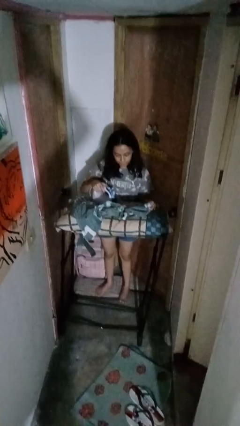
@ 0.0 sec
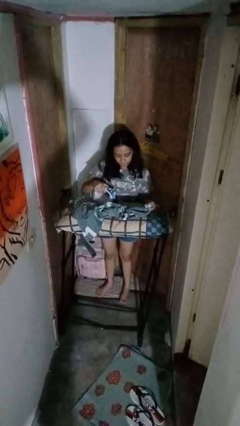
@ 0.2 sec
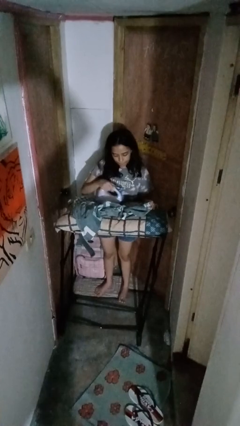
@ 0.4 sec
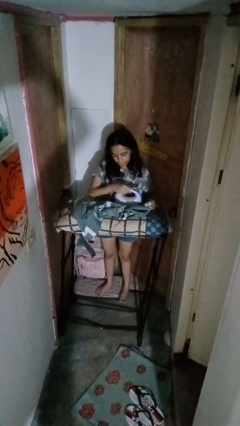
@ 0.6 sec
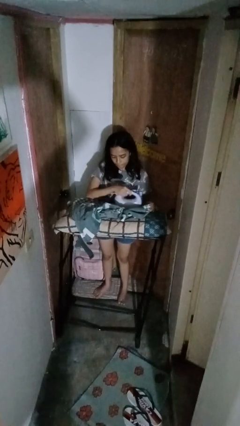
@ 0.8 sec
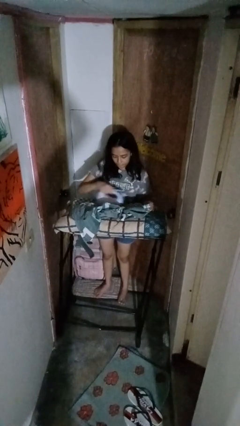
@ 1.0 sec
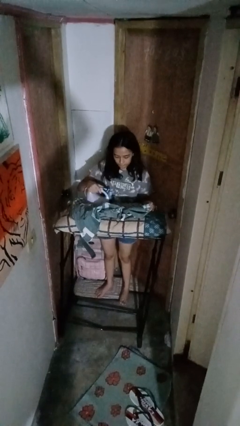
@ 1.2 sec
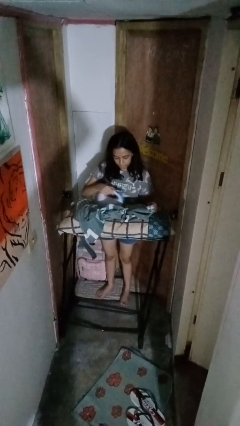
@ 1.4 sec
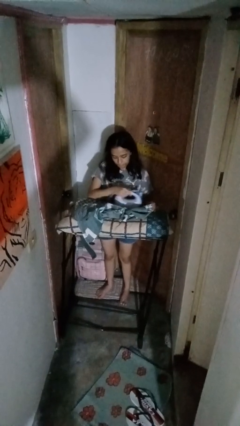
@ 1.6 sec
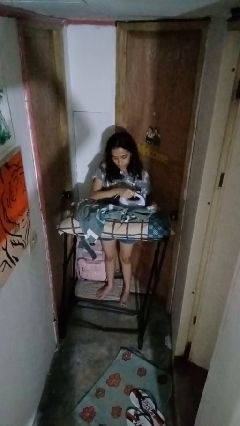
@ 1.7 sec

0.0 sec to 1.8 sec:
person irons clothes

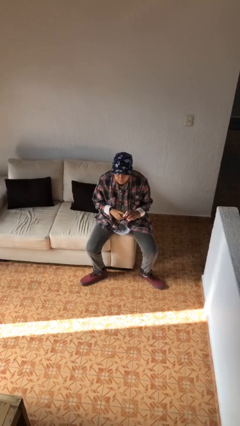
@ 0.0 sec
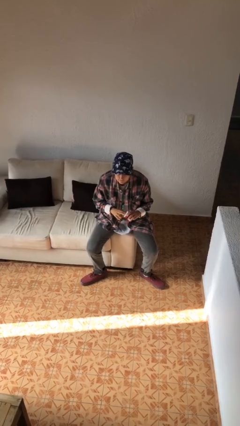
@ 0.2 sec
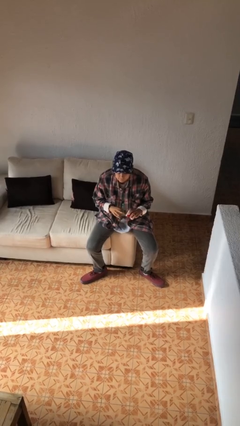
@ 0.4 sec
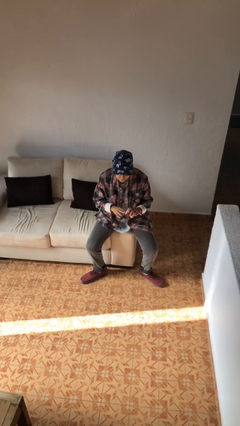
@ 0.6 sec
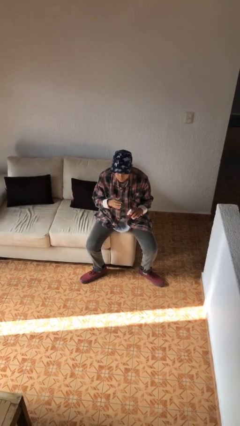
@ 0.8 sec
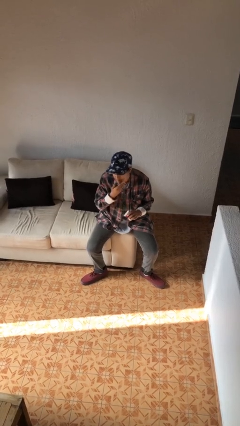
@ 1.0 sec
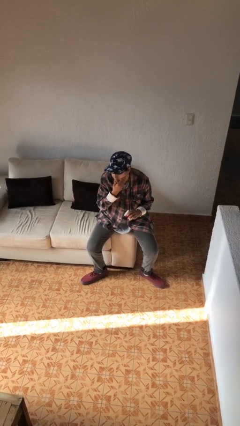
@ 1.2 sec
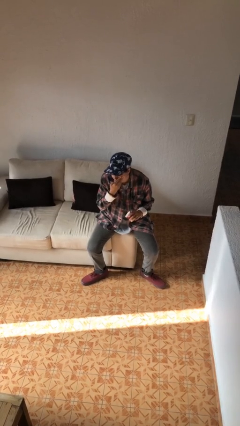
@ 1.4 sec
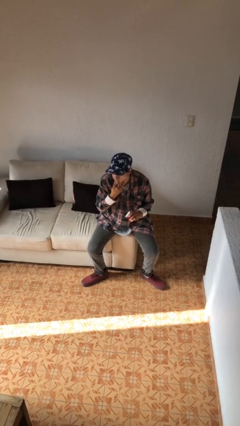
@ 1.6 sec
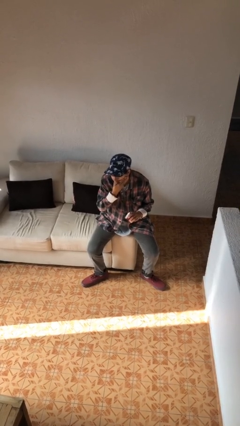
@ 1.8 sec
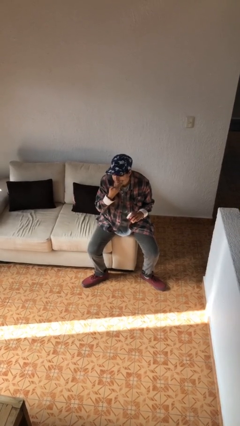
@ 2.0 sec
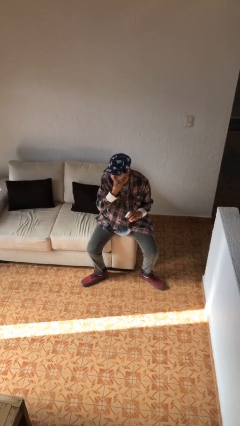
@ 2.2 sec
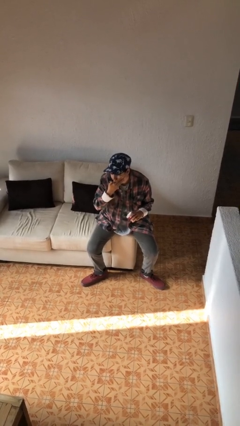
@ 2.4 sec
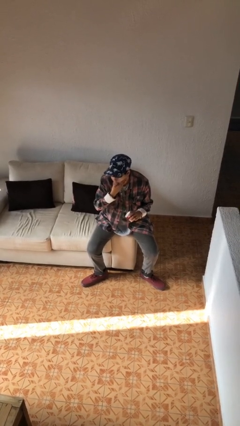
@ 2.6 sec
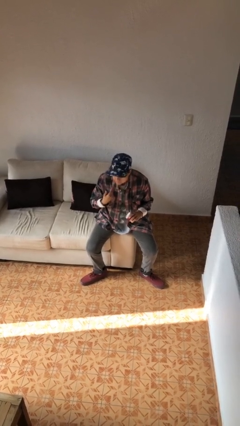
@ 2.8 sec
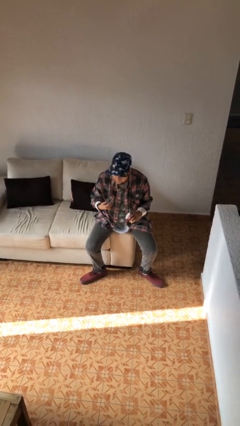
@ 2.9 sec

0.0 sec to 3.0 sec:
person applies facial moisturizer

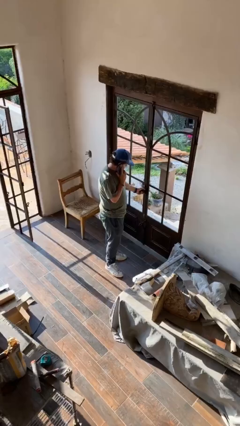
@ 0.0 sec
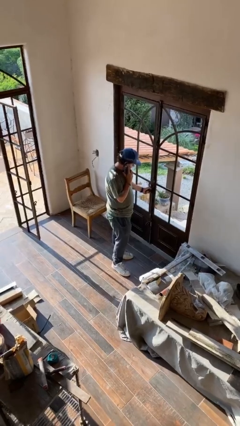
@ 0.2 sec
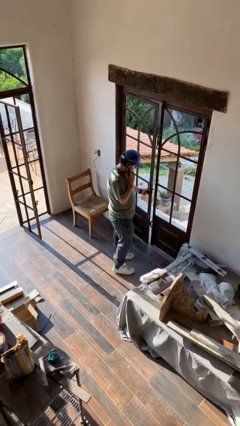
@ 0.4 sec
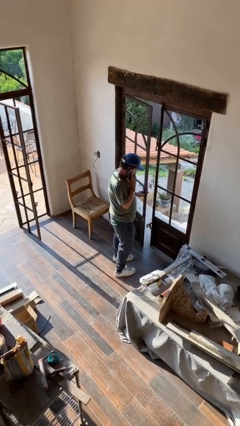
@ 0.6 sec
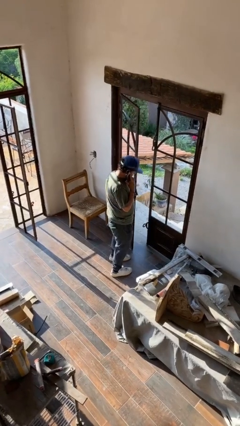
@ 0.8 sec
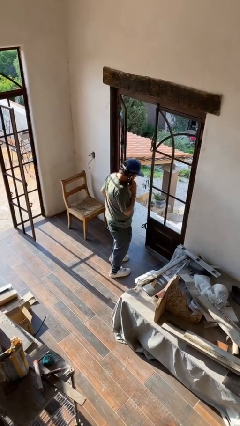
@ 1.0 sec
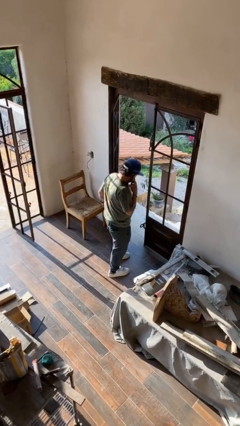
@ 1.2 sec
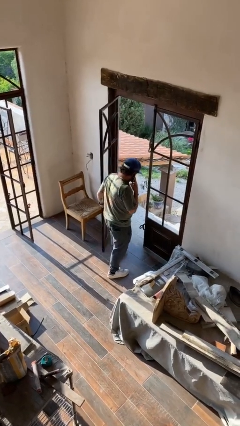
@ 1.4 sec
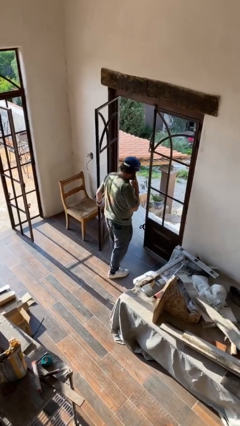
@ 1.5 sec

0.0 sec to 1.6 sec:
person opens facility door

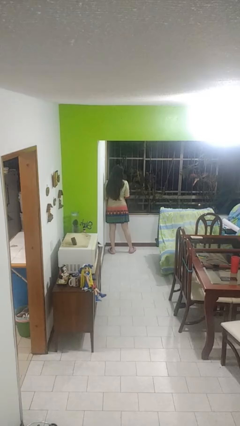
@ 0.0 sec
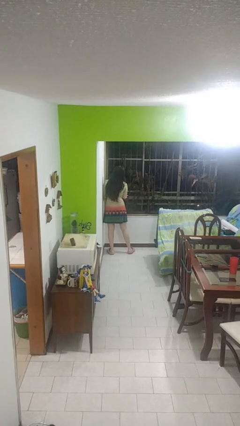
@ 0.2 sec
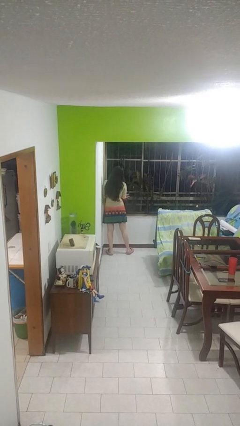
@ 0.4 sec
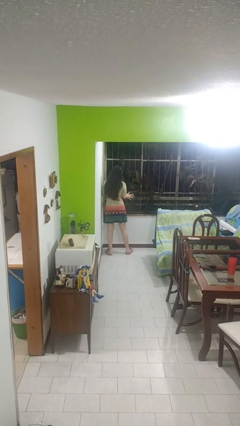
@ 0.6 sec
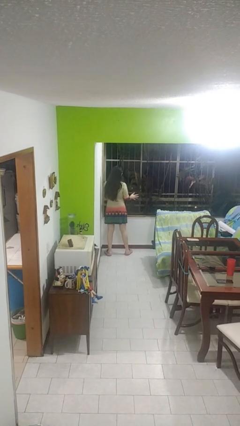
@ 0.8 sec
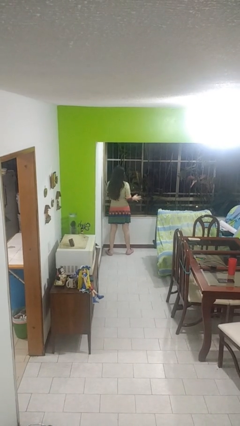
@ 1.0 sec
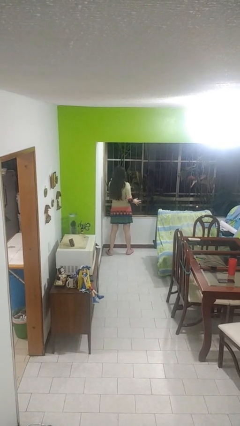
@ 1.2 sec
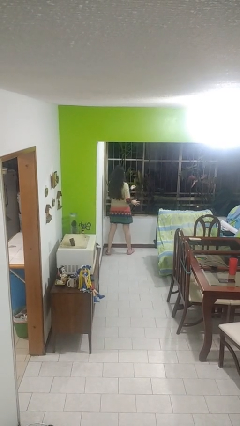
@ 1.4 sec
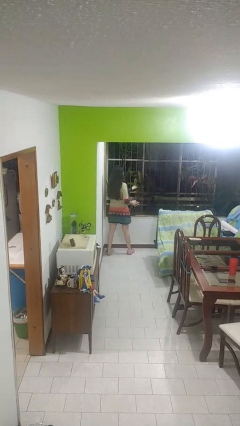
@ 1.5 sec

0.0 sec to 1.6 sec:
person opens home window

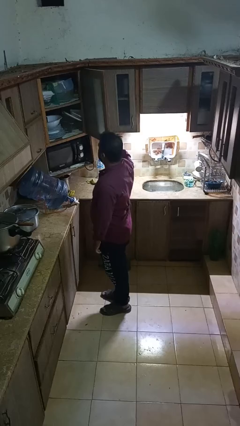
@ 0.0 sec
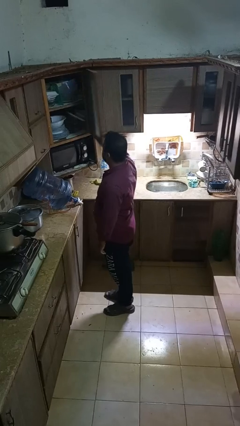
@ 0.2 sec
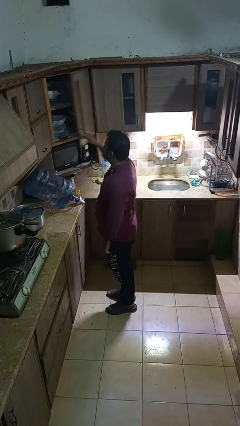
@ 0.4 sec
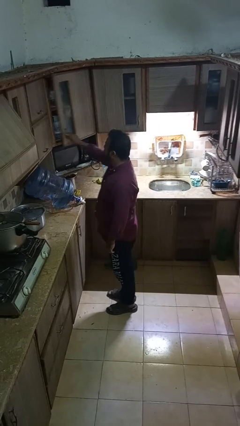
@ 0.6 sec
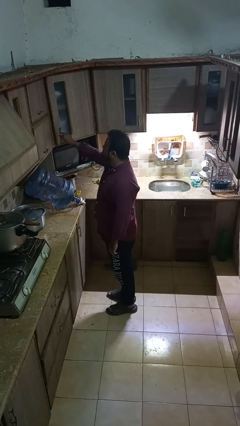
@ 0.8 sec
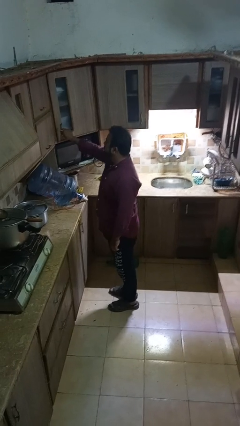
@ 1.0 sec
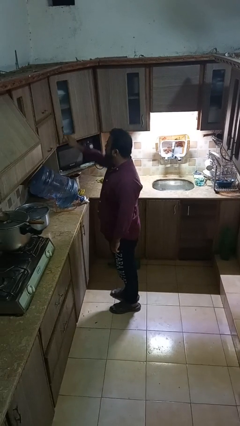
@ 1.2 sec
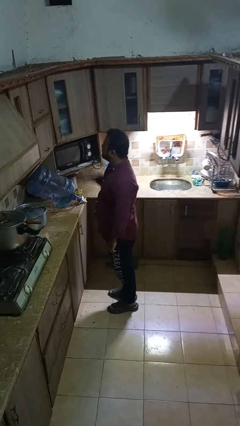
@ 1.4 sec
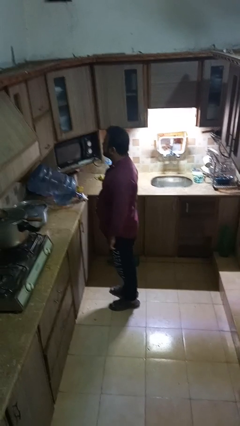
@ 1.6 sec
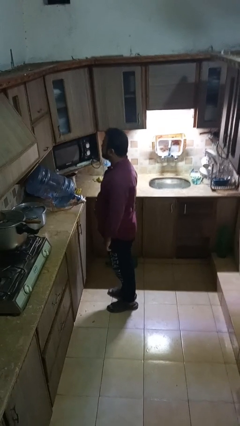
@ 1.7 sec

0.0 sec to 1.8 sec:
person closes cabinet

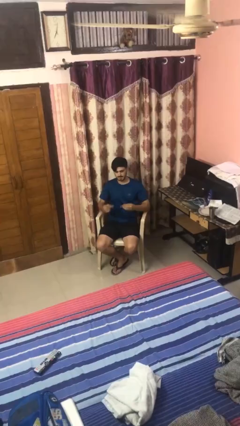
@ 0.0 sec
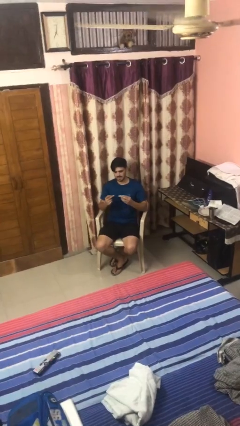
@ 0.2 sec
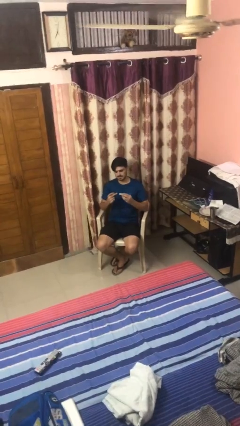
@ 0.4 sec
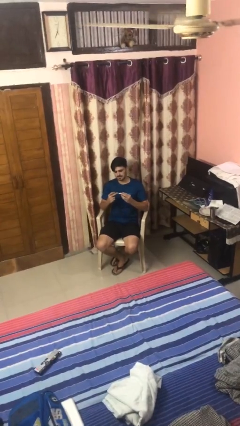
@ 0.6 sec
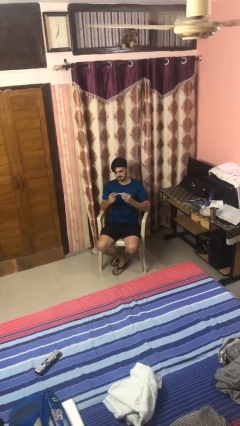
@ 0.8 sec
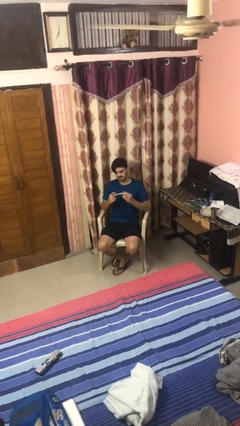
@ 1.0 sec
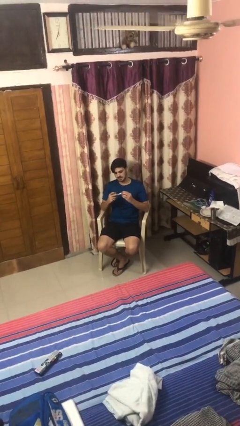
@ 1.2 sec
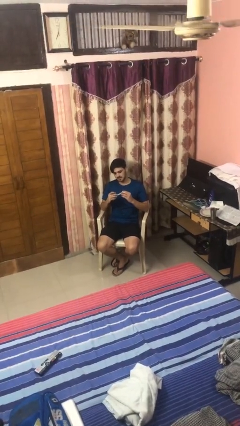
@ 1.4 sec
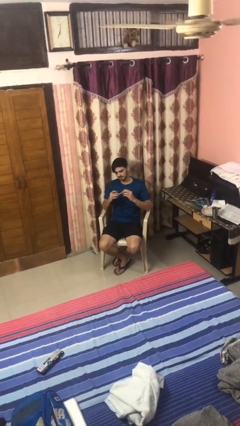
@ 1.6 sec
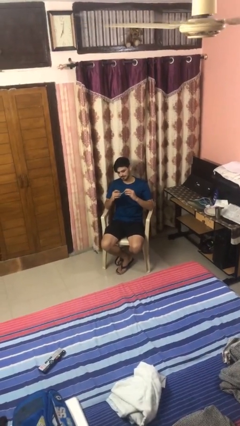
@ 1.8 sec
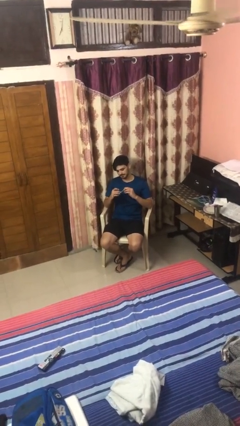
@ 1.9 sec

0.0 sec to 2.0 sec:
person clips fingernails

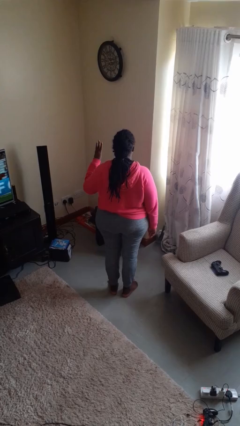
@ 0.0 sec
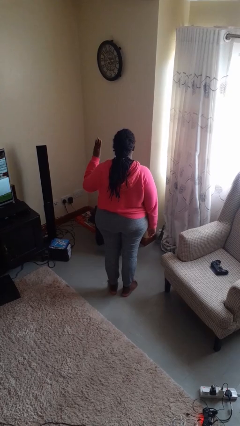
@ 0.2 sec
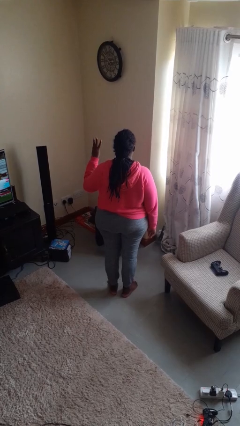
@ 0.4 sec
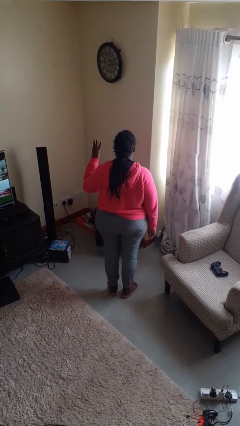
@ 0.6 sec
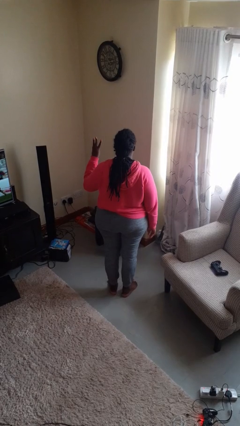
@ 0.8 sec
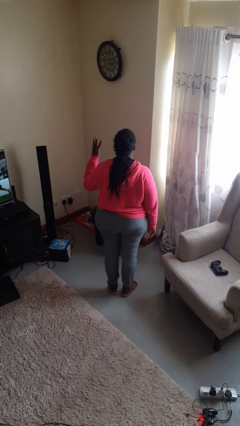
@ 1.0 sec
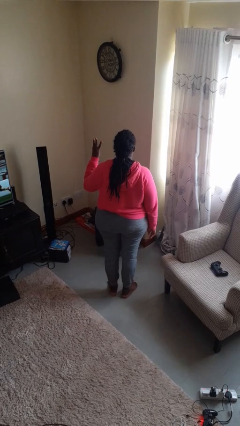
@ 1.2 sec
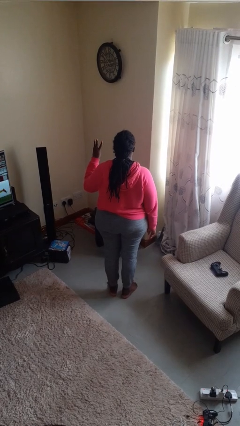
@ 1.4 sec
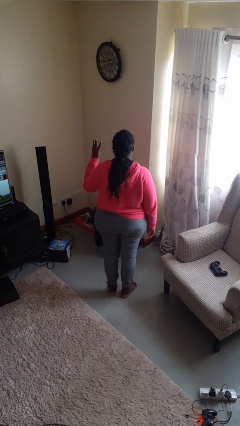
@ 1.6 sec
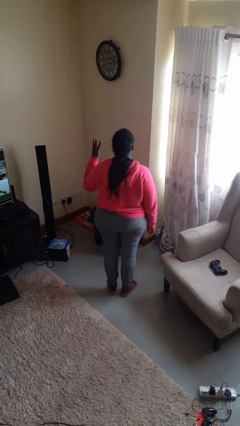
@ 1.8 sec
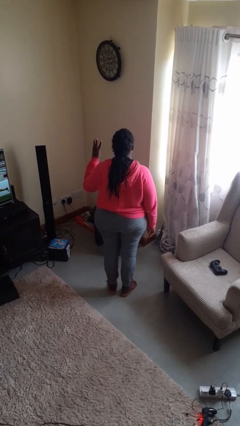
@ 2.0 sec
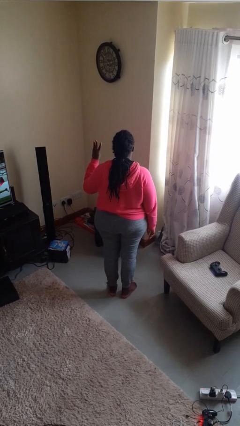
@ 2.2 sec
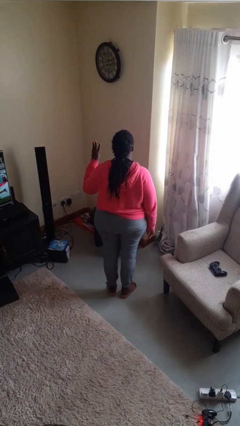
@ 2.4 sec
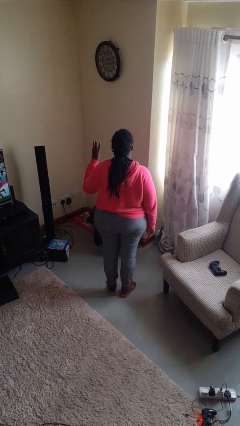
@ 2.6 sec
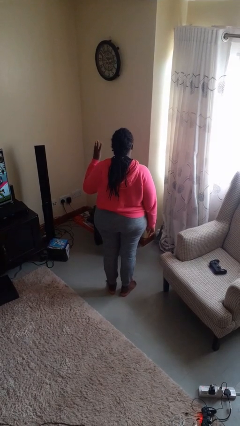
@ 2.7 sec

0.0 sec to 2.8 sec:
person gestures number three

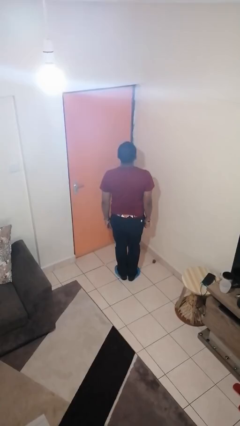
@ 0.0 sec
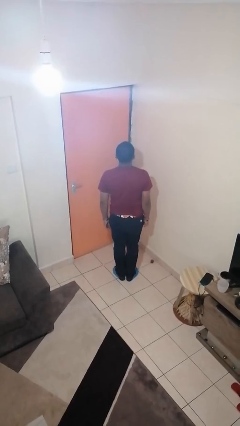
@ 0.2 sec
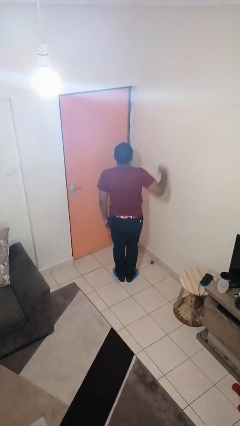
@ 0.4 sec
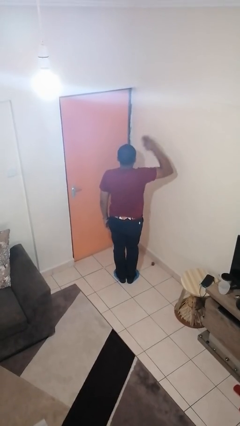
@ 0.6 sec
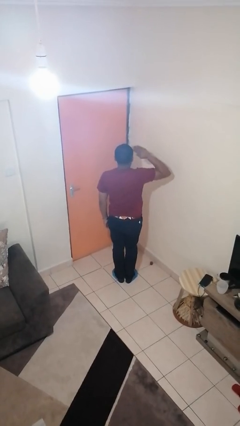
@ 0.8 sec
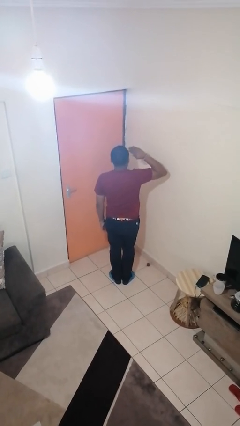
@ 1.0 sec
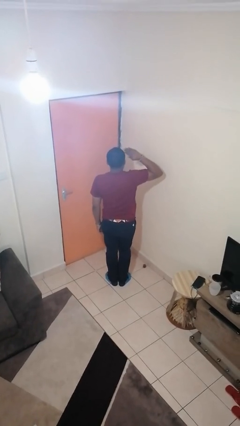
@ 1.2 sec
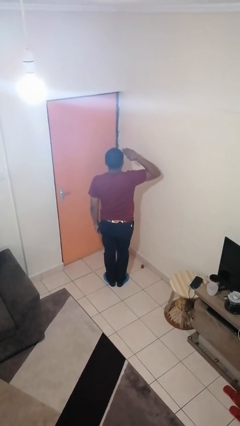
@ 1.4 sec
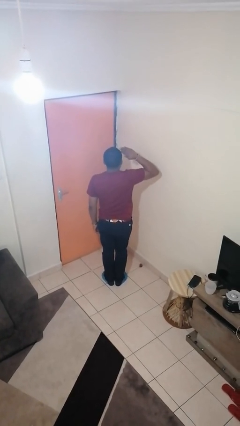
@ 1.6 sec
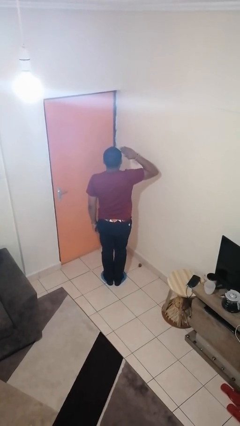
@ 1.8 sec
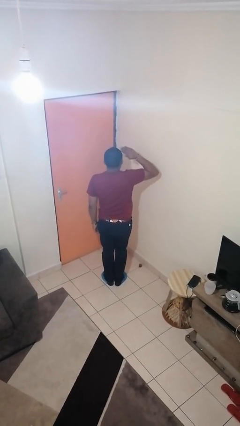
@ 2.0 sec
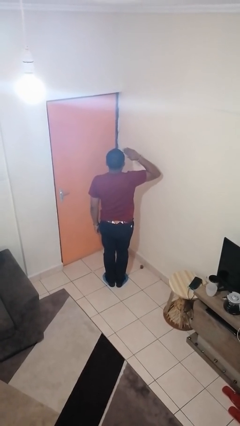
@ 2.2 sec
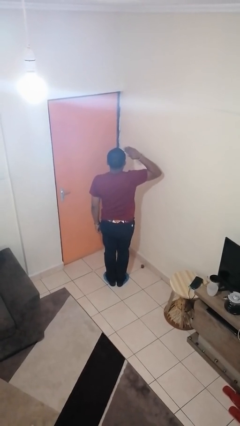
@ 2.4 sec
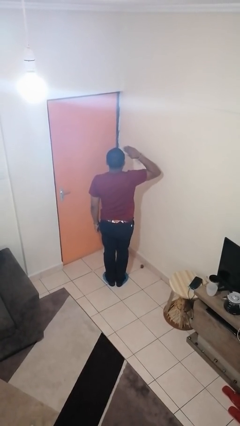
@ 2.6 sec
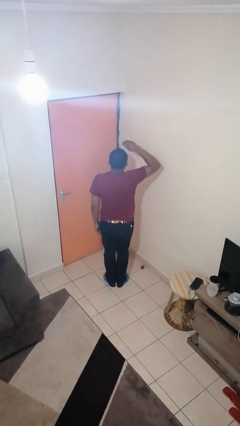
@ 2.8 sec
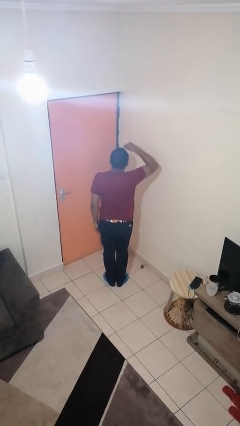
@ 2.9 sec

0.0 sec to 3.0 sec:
person salutes
